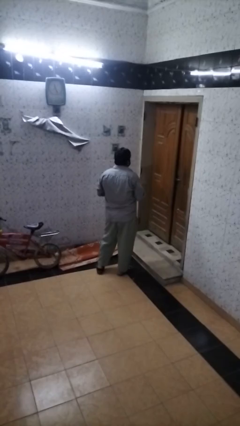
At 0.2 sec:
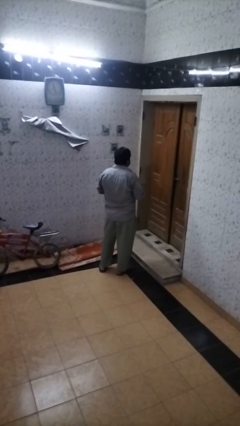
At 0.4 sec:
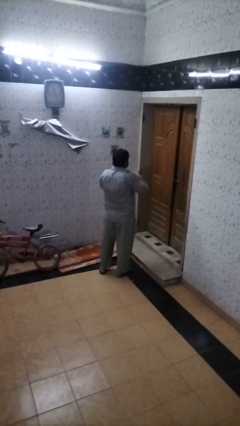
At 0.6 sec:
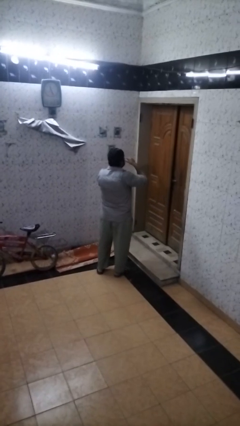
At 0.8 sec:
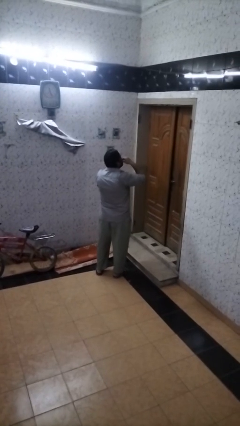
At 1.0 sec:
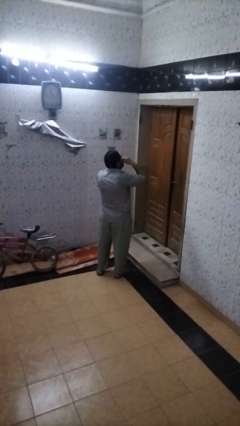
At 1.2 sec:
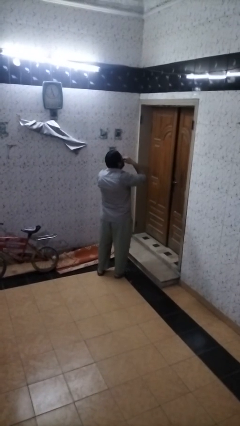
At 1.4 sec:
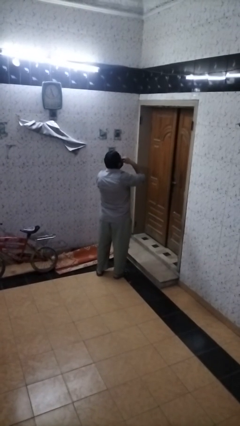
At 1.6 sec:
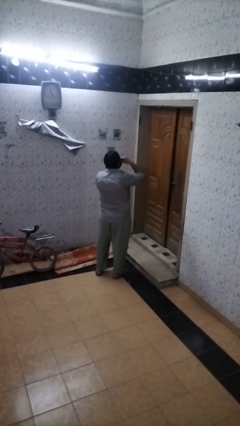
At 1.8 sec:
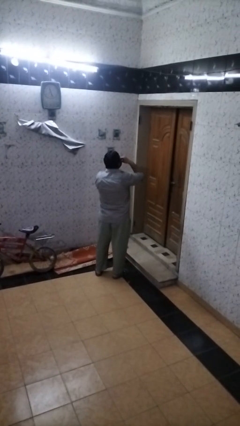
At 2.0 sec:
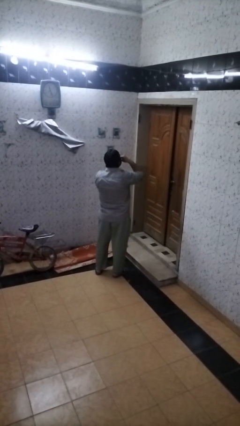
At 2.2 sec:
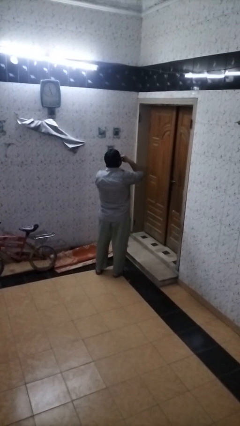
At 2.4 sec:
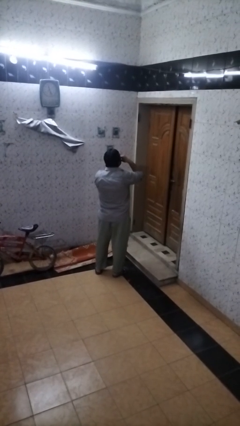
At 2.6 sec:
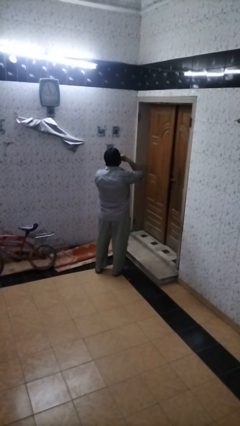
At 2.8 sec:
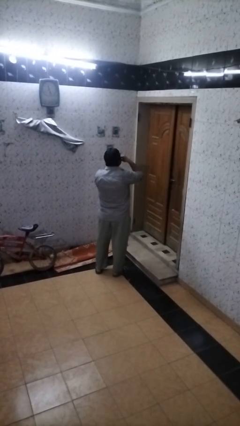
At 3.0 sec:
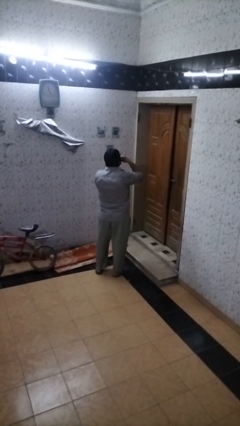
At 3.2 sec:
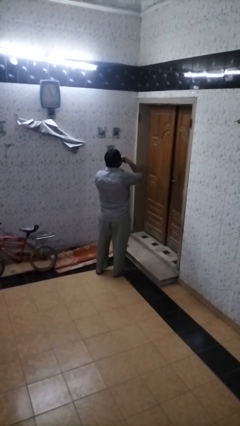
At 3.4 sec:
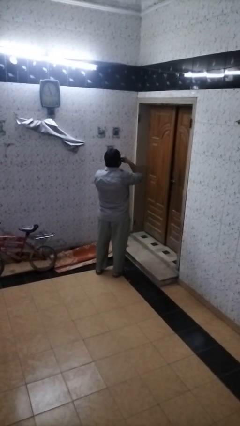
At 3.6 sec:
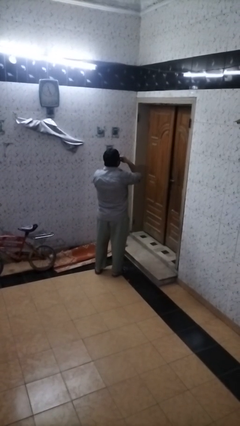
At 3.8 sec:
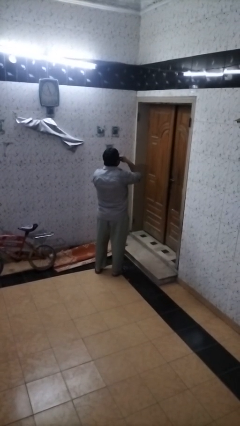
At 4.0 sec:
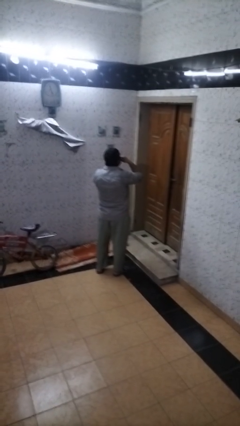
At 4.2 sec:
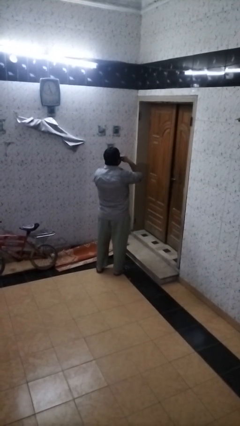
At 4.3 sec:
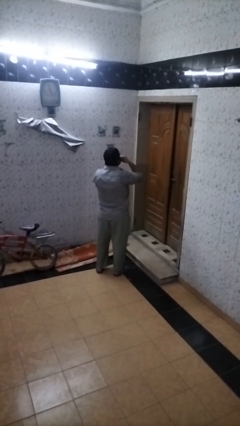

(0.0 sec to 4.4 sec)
person flosses

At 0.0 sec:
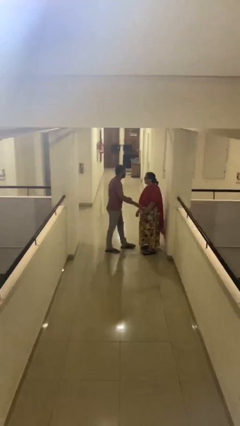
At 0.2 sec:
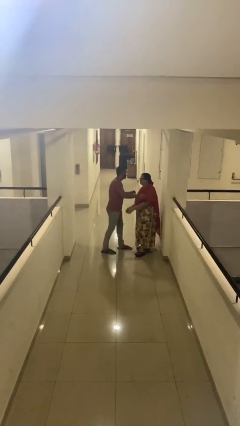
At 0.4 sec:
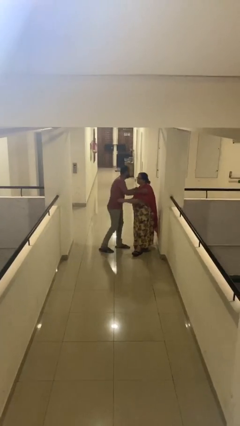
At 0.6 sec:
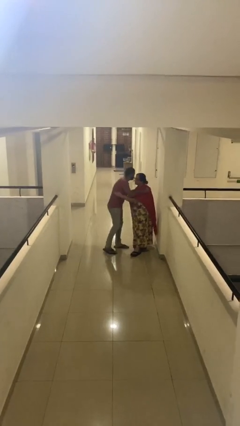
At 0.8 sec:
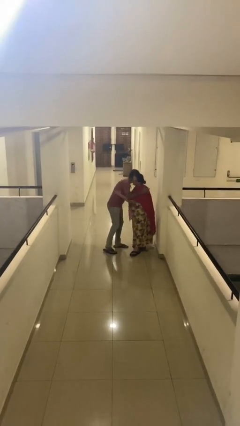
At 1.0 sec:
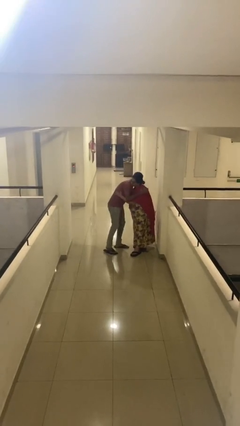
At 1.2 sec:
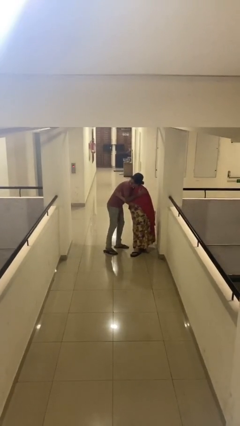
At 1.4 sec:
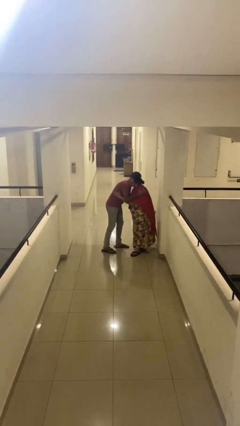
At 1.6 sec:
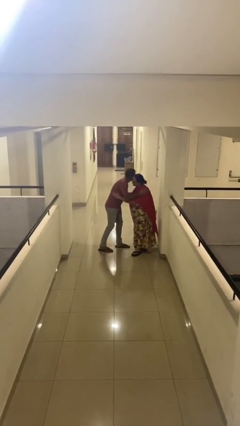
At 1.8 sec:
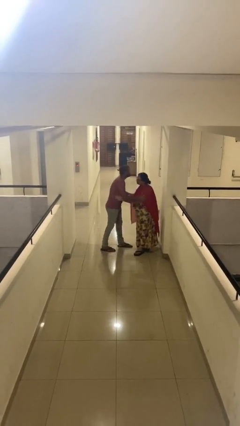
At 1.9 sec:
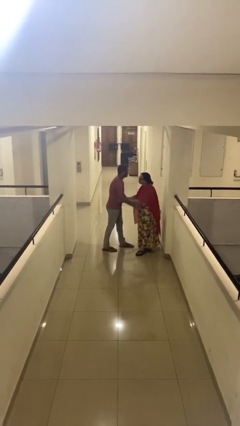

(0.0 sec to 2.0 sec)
person embraces person

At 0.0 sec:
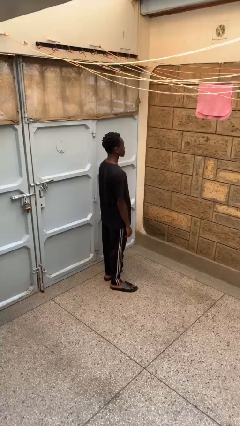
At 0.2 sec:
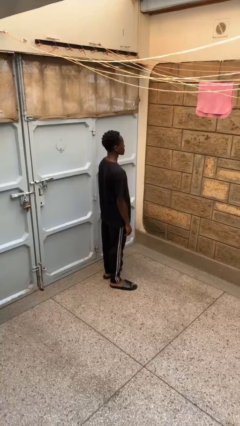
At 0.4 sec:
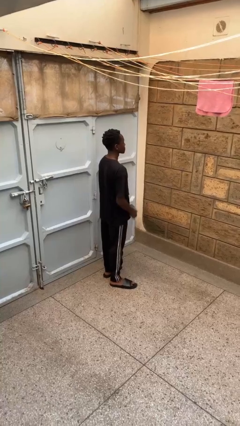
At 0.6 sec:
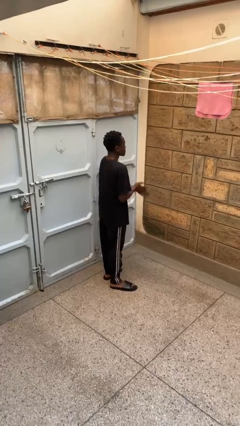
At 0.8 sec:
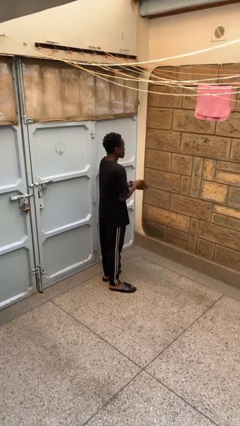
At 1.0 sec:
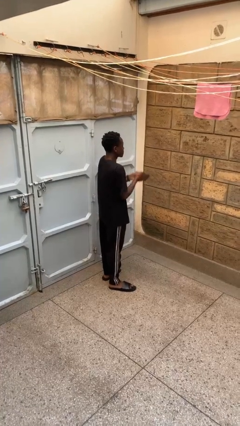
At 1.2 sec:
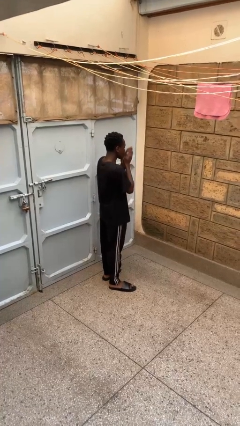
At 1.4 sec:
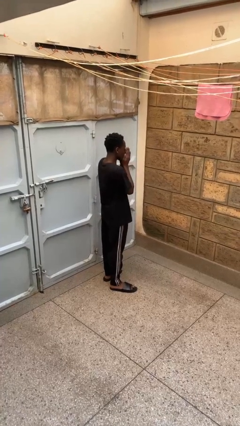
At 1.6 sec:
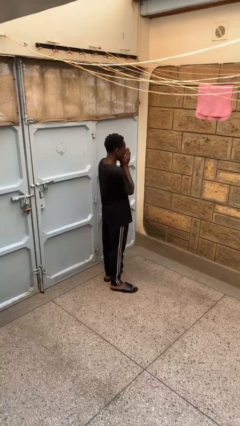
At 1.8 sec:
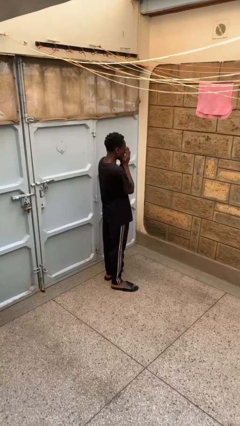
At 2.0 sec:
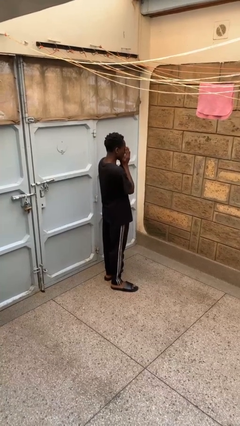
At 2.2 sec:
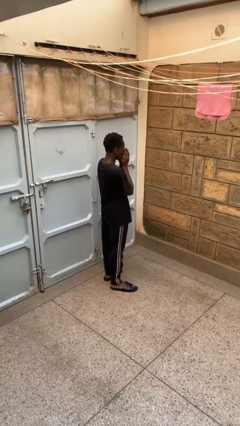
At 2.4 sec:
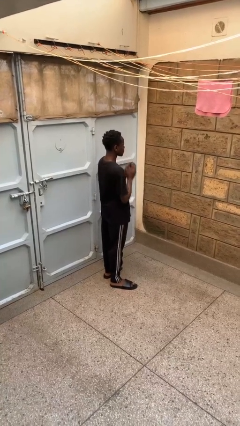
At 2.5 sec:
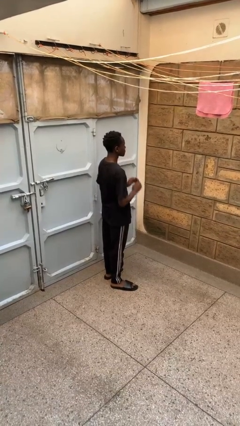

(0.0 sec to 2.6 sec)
person blows into hands

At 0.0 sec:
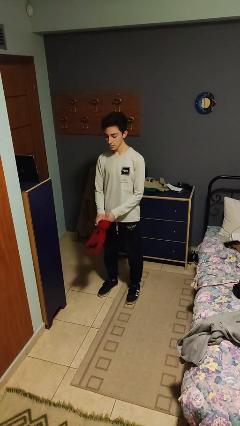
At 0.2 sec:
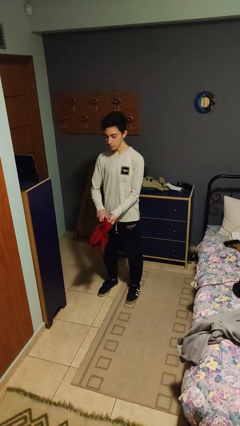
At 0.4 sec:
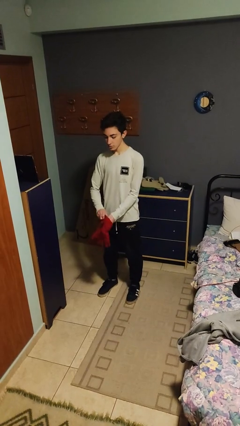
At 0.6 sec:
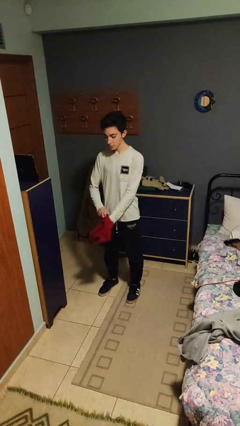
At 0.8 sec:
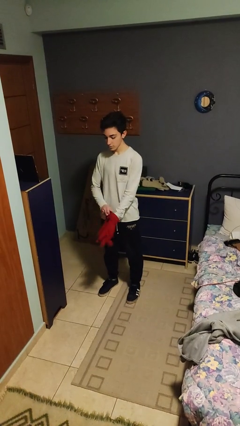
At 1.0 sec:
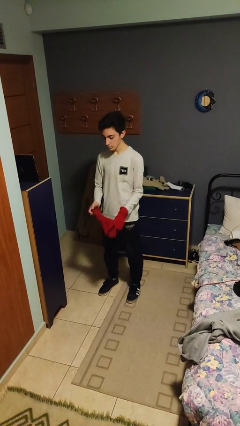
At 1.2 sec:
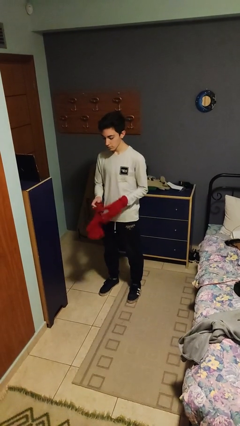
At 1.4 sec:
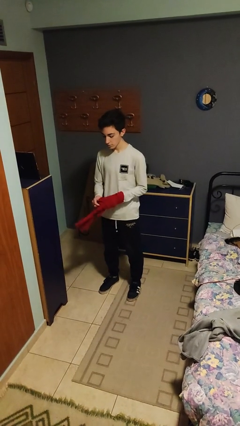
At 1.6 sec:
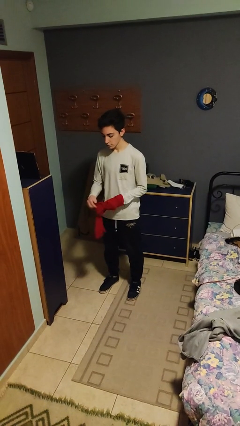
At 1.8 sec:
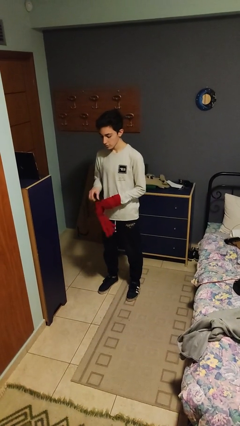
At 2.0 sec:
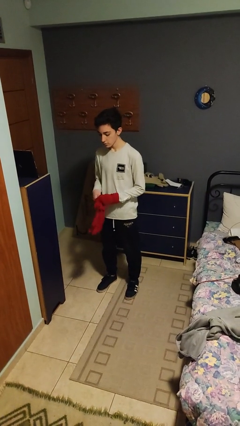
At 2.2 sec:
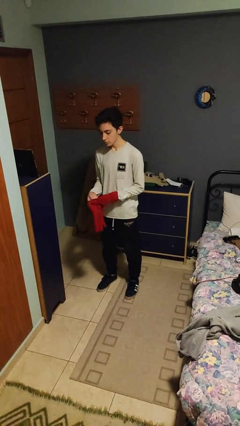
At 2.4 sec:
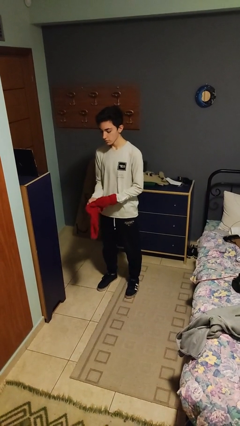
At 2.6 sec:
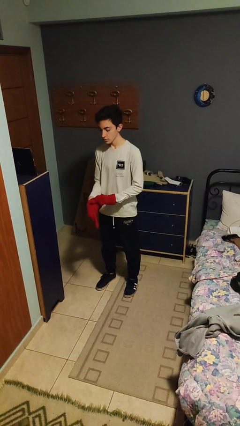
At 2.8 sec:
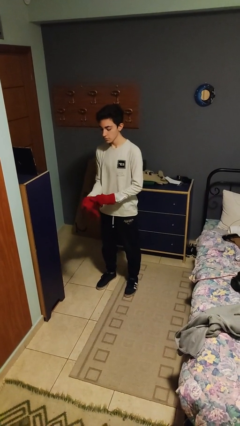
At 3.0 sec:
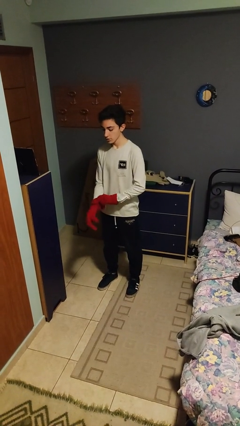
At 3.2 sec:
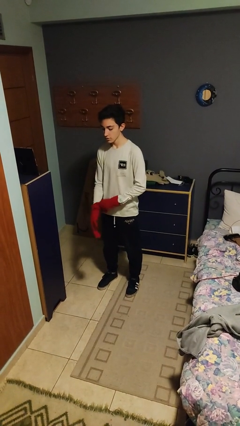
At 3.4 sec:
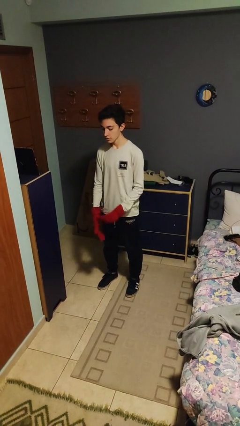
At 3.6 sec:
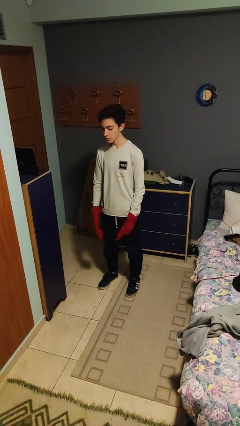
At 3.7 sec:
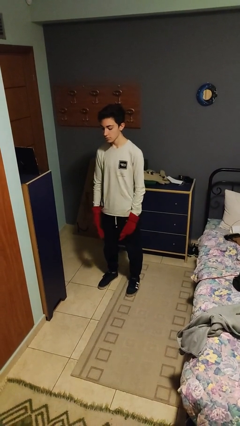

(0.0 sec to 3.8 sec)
person puts on gloves

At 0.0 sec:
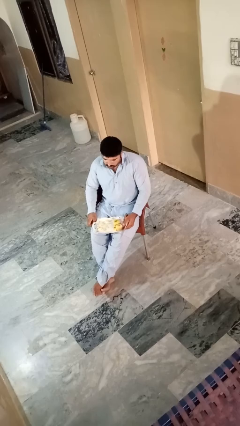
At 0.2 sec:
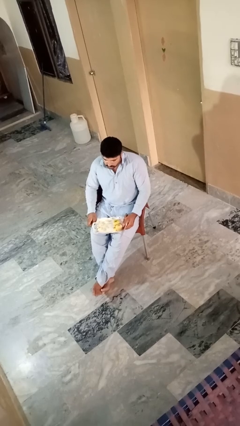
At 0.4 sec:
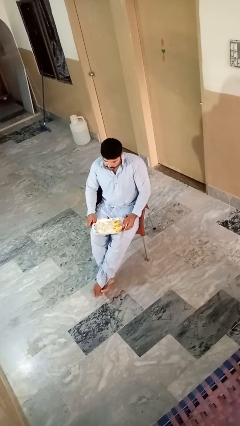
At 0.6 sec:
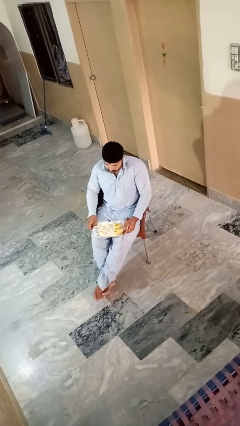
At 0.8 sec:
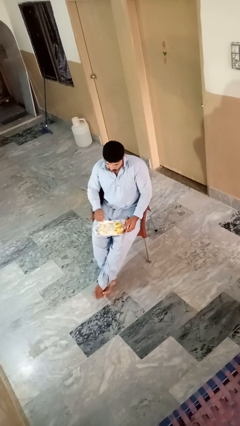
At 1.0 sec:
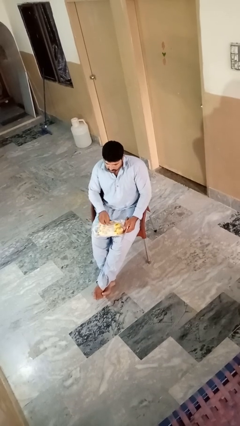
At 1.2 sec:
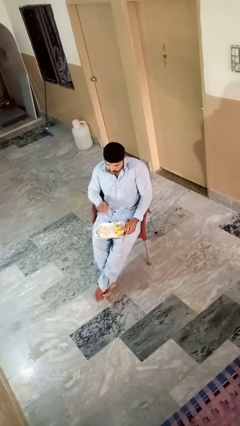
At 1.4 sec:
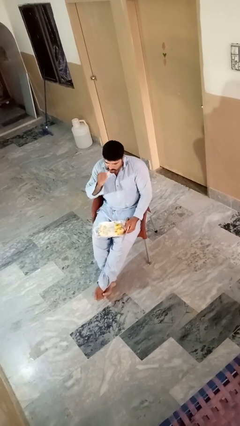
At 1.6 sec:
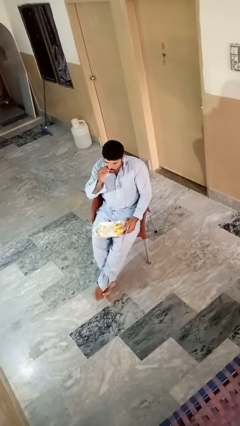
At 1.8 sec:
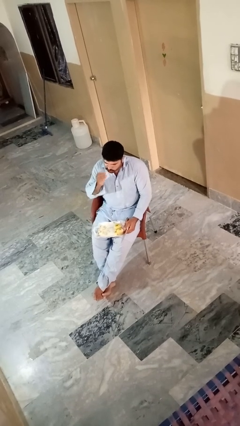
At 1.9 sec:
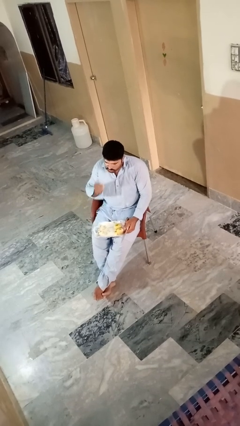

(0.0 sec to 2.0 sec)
person eats apple

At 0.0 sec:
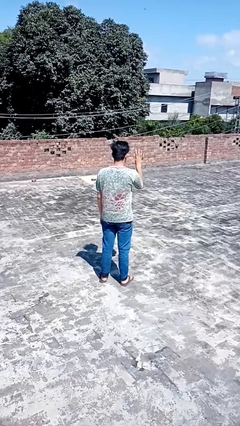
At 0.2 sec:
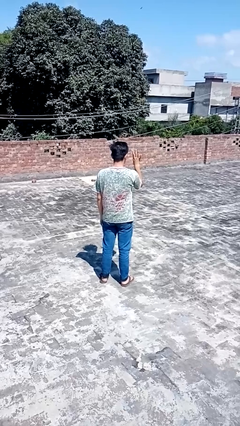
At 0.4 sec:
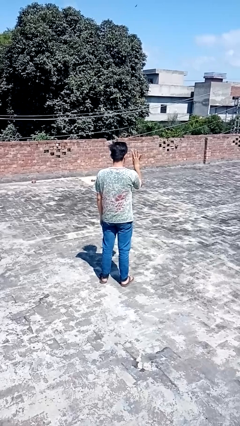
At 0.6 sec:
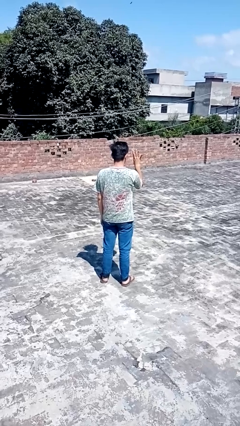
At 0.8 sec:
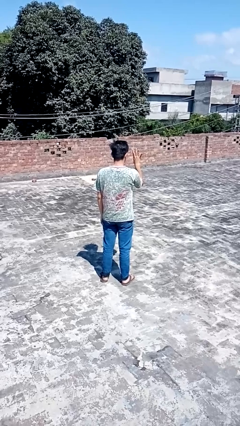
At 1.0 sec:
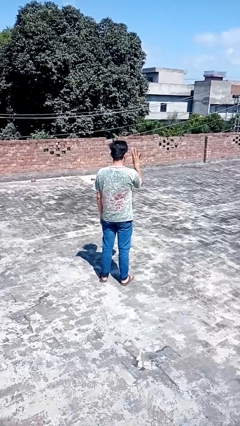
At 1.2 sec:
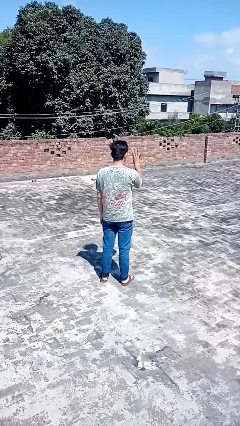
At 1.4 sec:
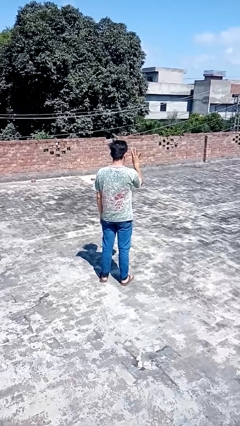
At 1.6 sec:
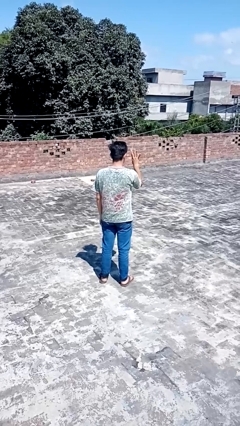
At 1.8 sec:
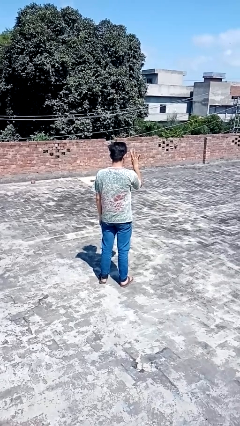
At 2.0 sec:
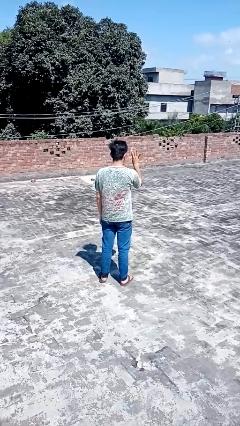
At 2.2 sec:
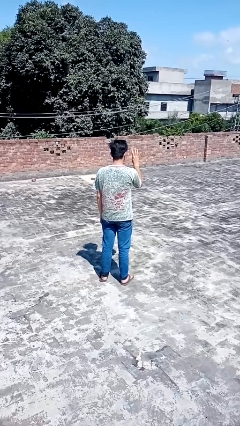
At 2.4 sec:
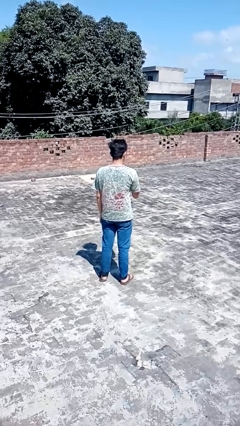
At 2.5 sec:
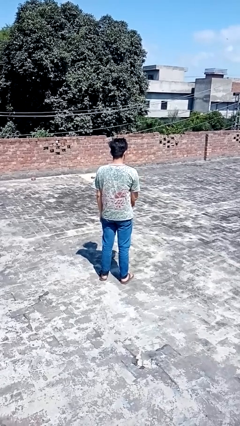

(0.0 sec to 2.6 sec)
person gestures number four
